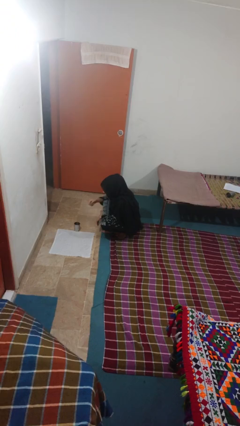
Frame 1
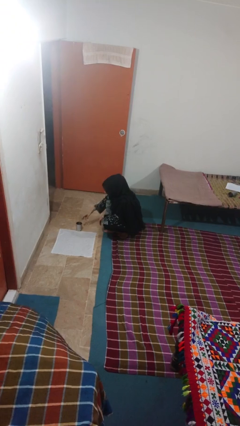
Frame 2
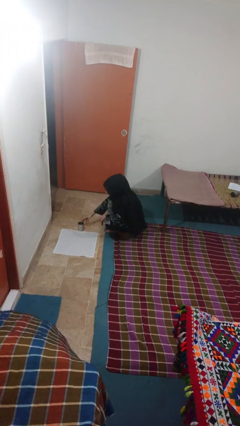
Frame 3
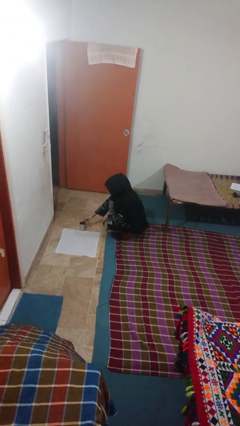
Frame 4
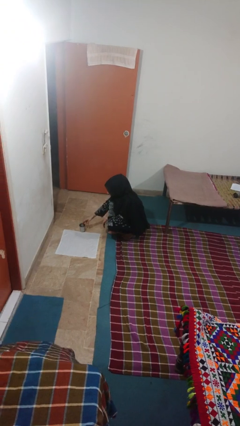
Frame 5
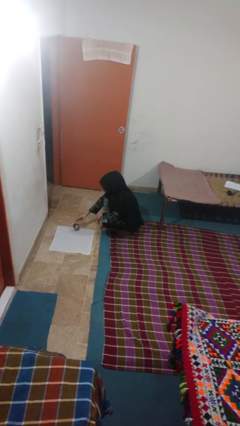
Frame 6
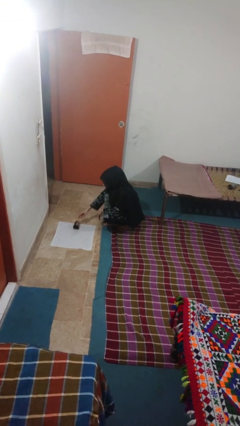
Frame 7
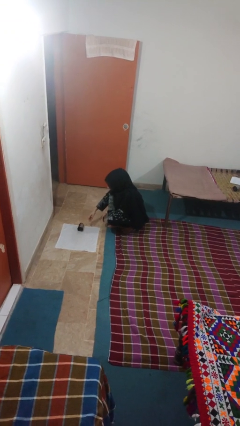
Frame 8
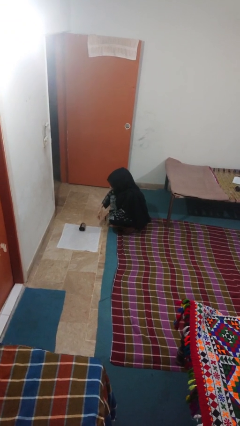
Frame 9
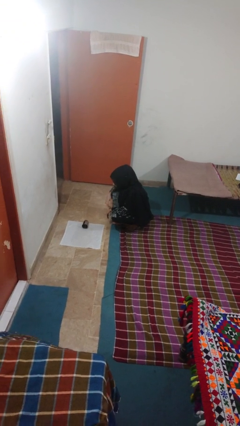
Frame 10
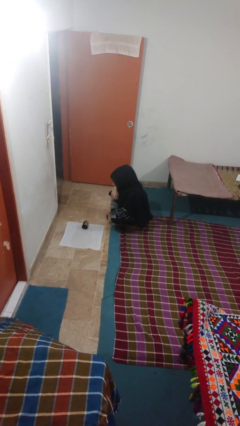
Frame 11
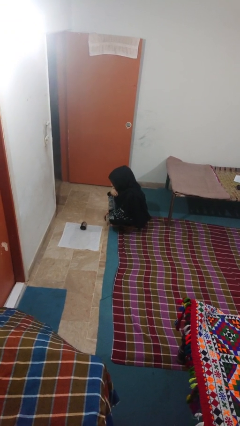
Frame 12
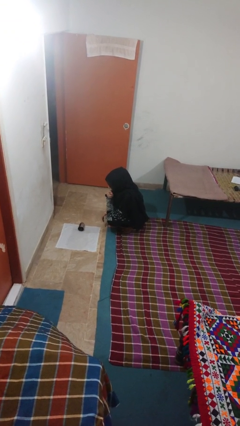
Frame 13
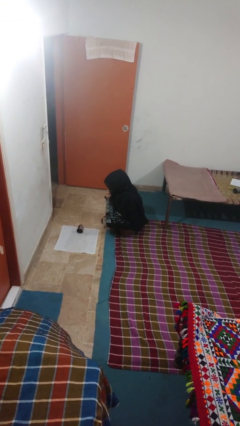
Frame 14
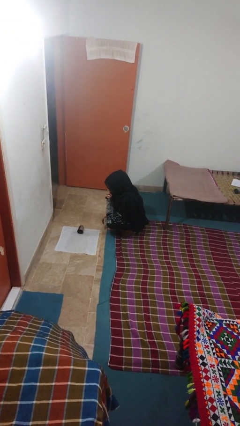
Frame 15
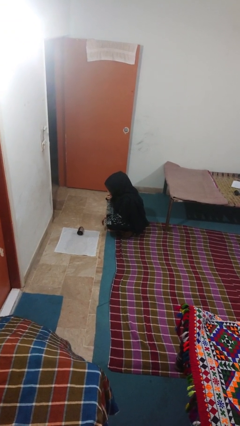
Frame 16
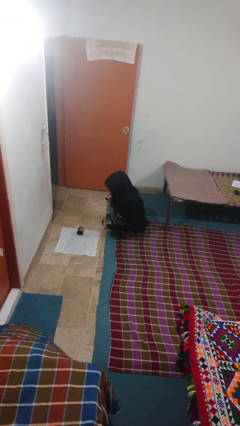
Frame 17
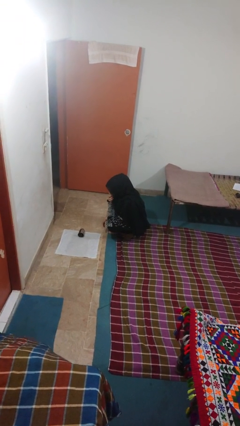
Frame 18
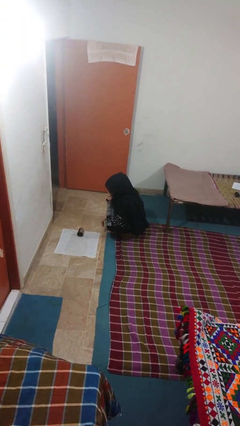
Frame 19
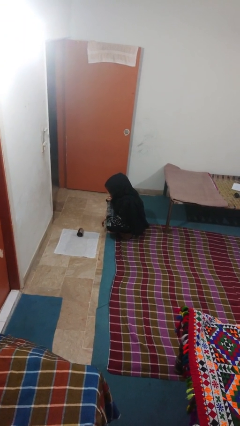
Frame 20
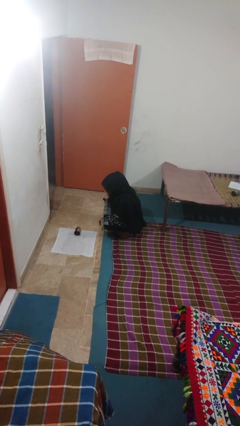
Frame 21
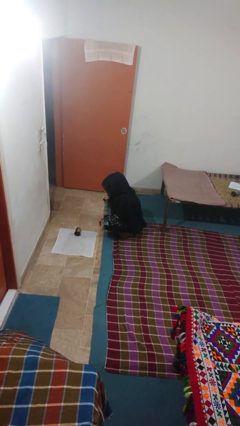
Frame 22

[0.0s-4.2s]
person spills on floor

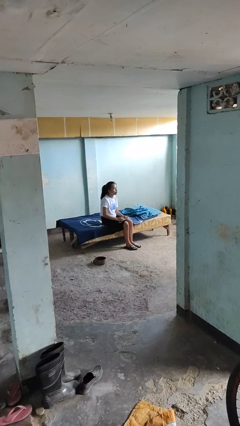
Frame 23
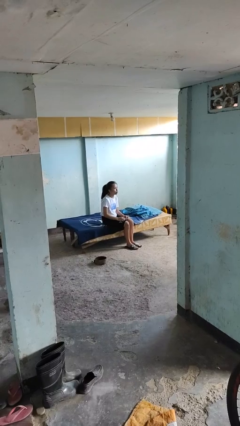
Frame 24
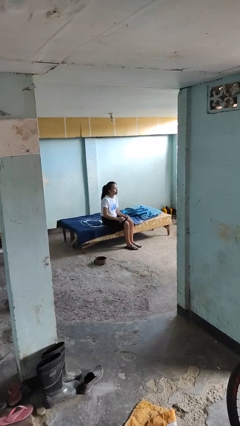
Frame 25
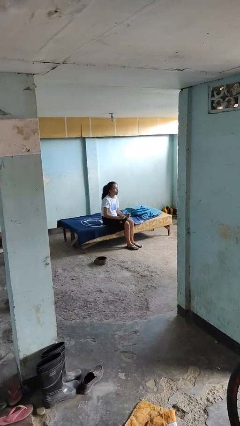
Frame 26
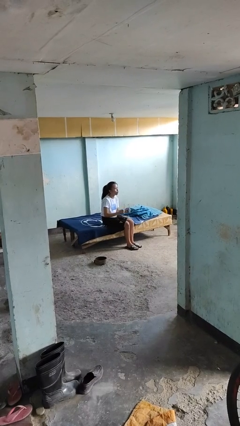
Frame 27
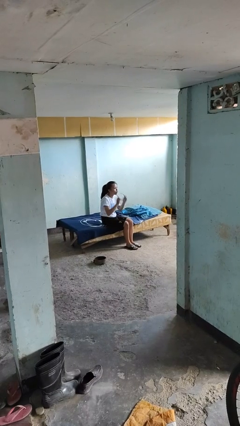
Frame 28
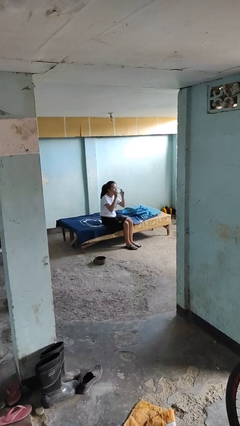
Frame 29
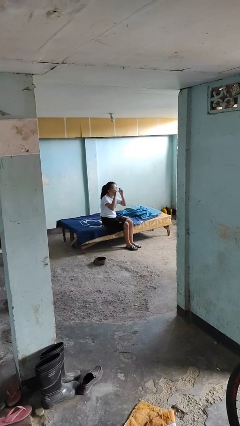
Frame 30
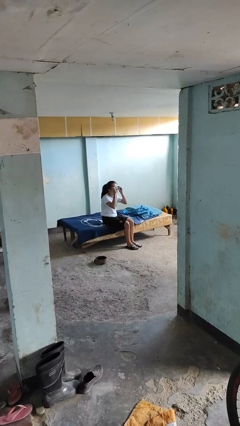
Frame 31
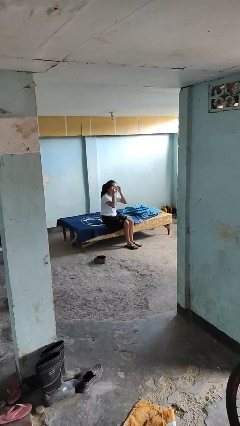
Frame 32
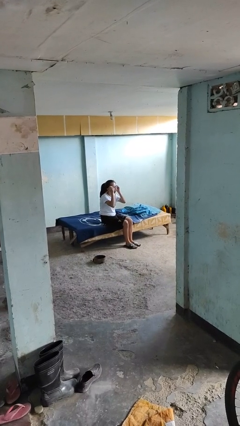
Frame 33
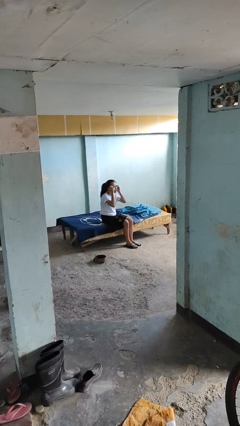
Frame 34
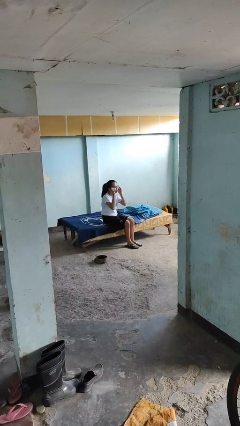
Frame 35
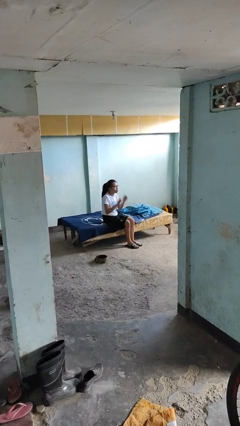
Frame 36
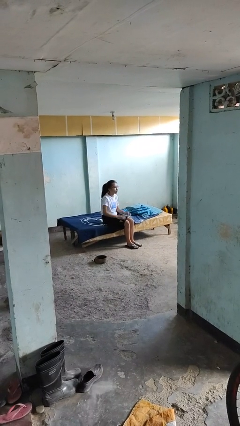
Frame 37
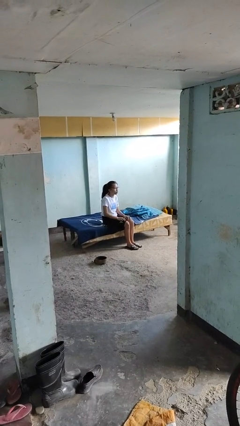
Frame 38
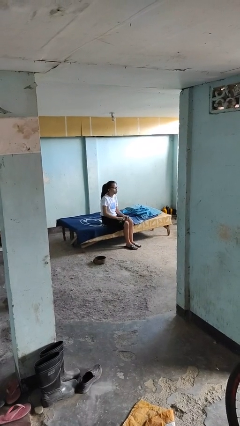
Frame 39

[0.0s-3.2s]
person puts on glasses

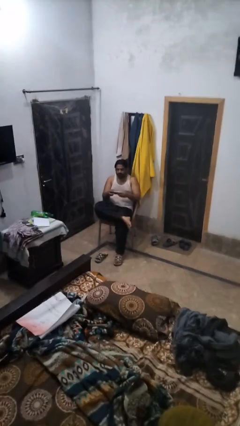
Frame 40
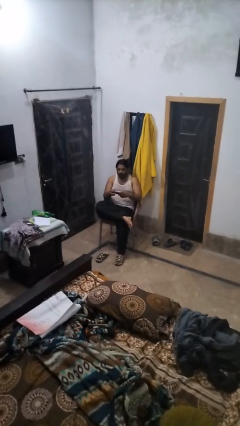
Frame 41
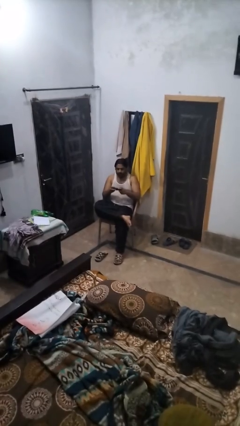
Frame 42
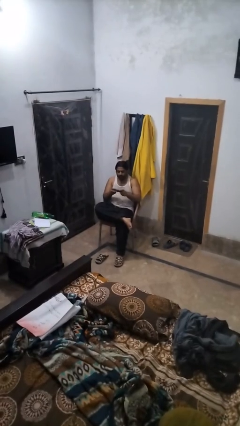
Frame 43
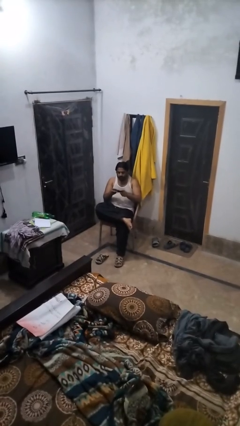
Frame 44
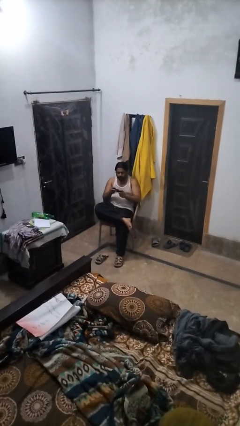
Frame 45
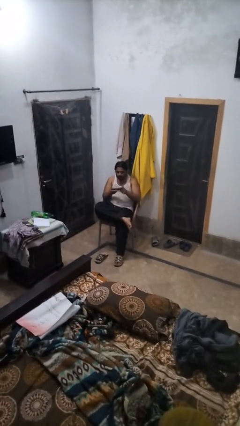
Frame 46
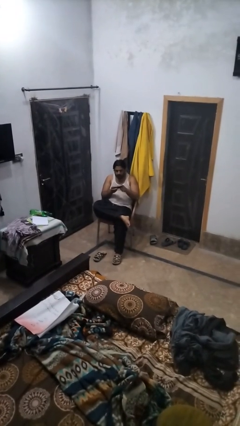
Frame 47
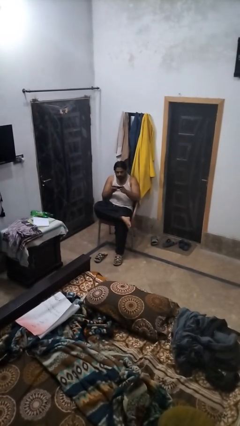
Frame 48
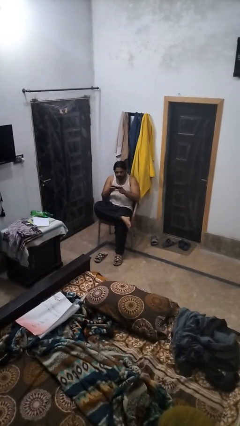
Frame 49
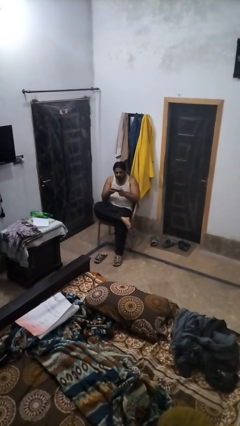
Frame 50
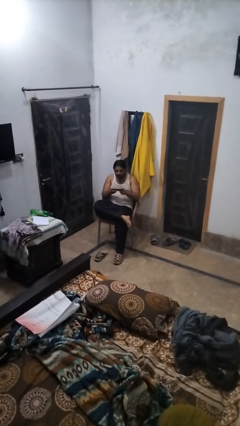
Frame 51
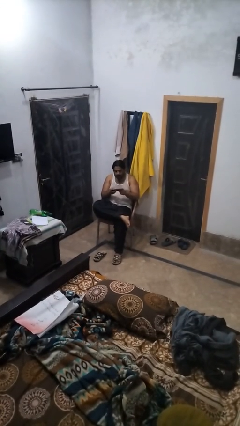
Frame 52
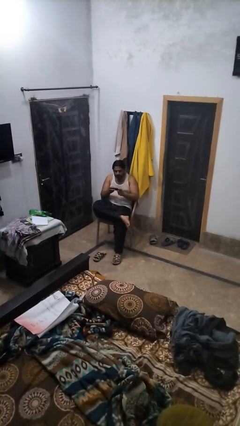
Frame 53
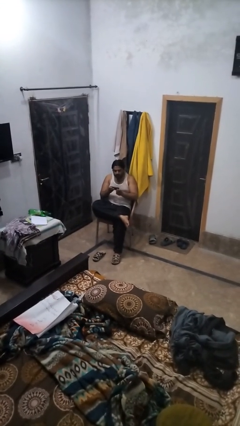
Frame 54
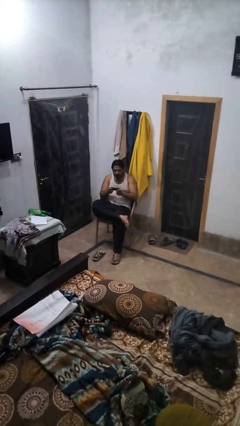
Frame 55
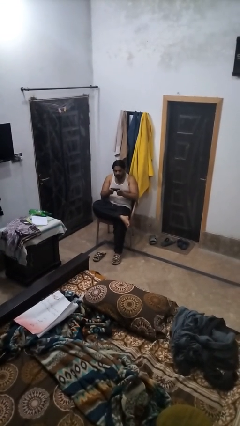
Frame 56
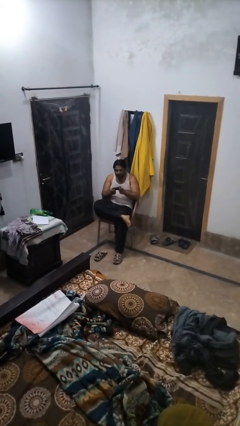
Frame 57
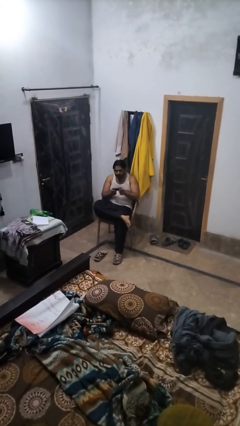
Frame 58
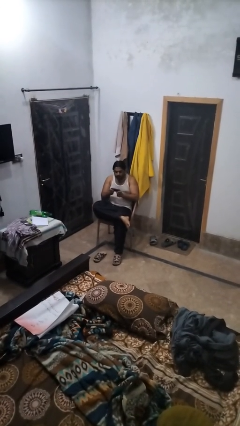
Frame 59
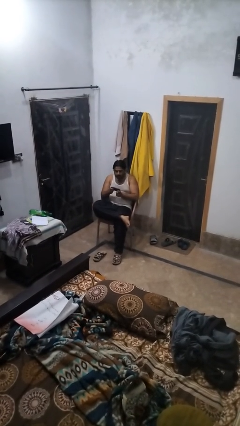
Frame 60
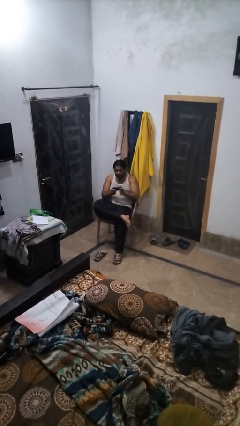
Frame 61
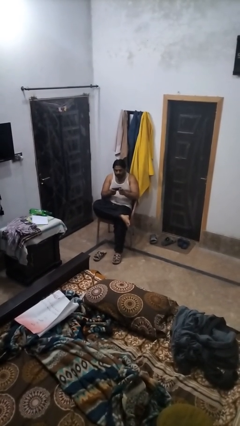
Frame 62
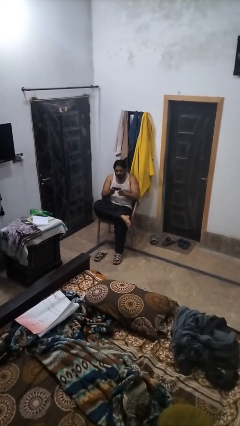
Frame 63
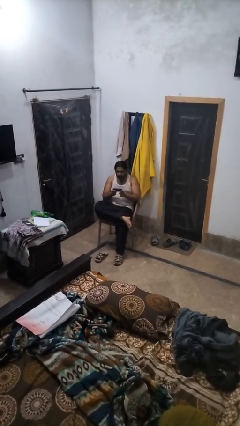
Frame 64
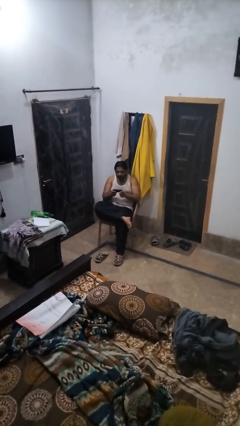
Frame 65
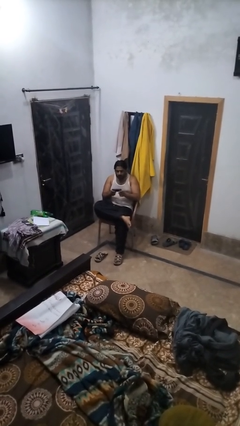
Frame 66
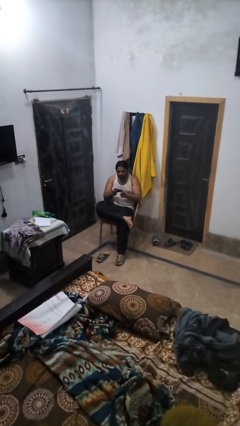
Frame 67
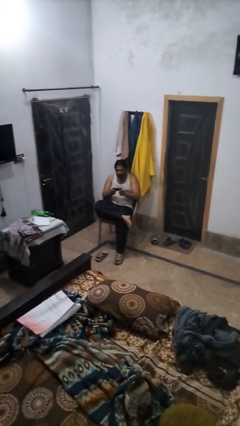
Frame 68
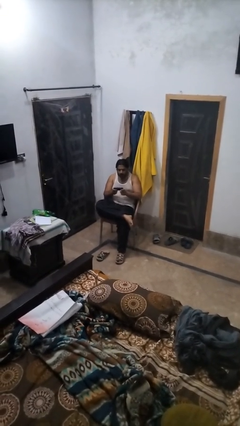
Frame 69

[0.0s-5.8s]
person interacts with handheld game

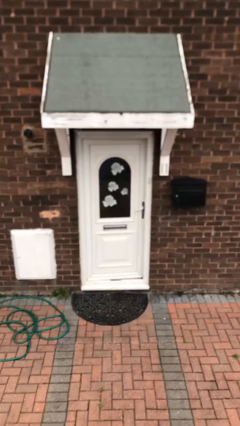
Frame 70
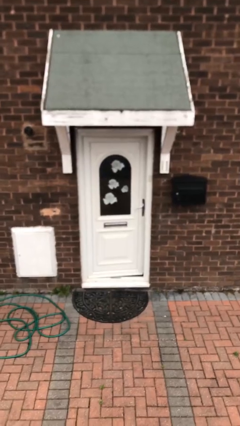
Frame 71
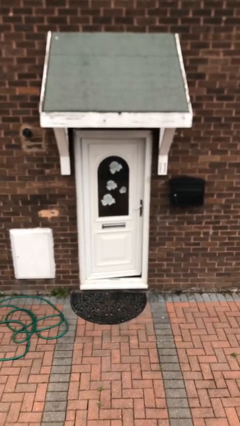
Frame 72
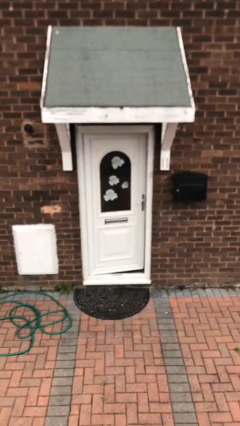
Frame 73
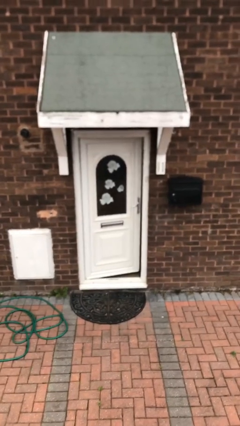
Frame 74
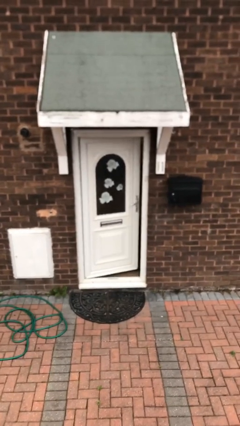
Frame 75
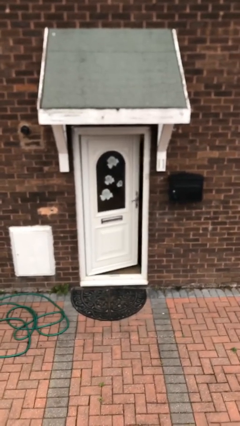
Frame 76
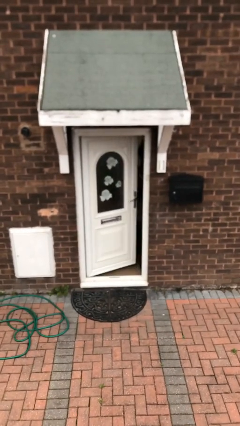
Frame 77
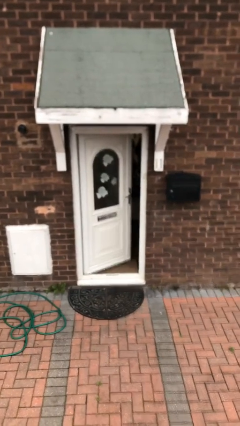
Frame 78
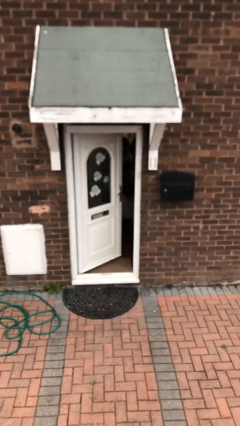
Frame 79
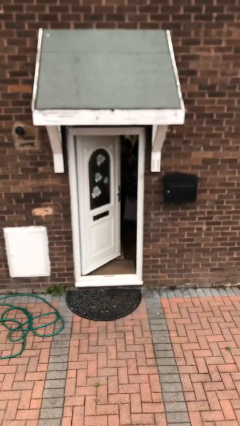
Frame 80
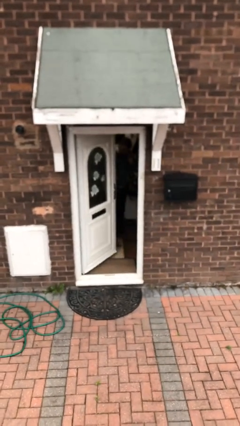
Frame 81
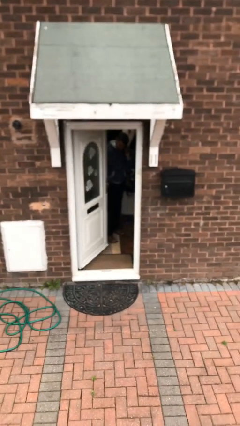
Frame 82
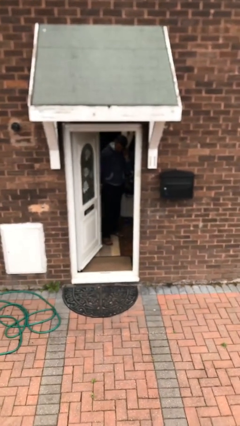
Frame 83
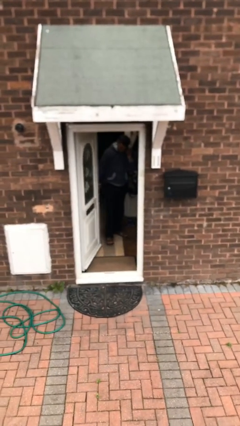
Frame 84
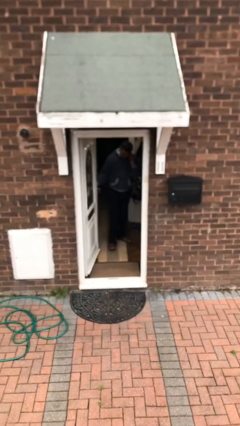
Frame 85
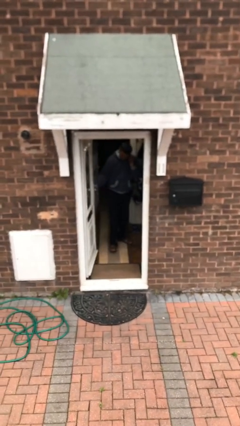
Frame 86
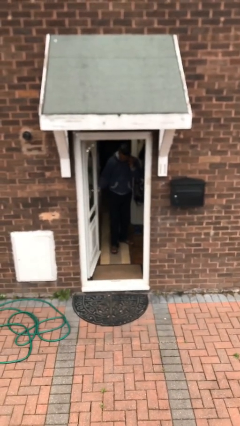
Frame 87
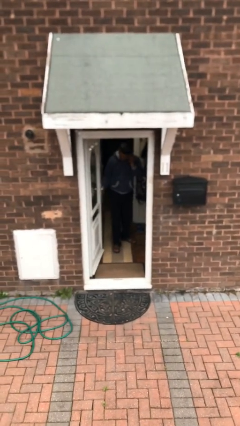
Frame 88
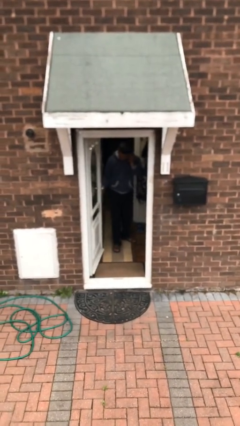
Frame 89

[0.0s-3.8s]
person opens facility door

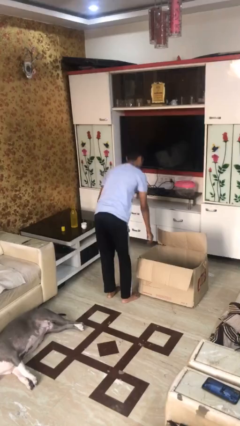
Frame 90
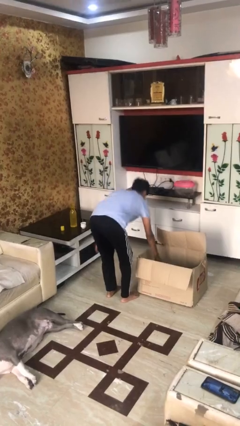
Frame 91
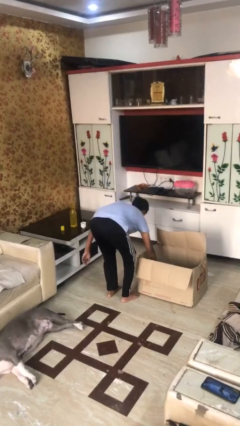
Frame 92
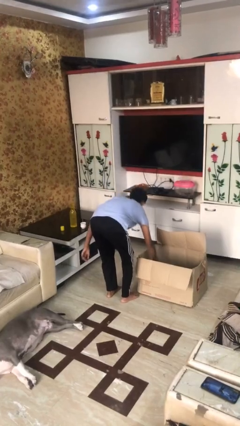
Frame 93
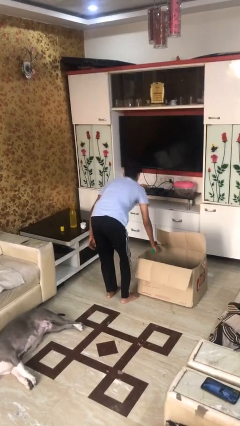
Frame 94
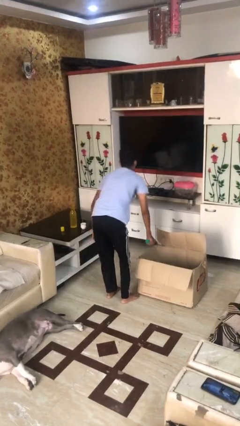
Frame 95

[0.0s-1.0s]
person takes object from box

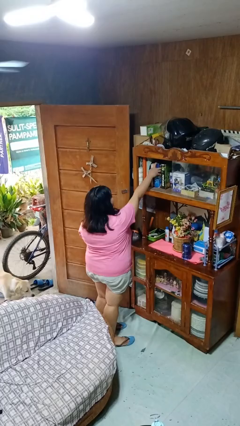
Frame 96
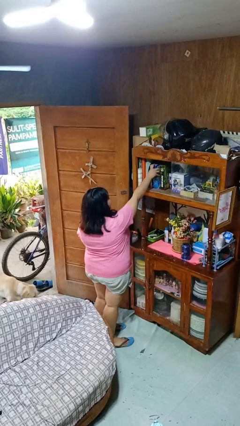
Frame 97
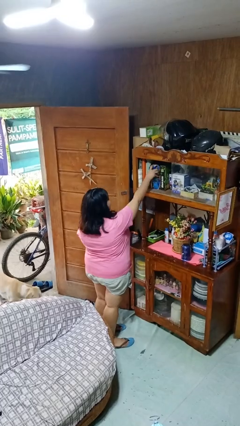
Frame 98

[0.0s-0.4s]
person picks up object from shelf
